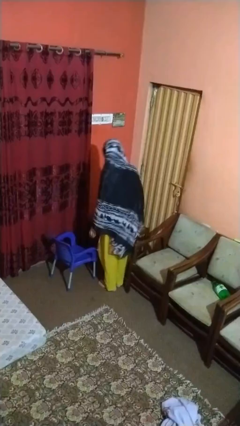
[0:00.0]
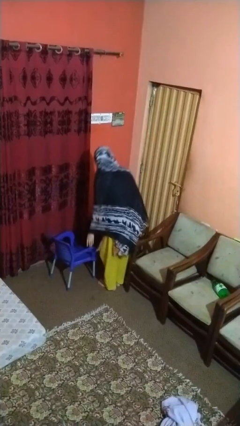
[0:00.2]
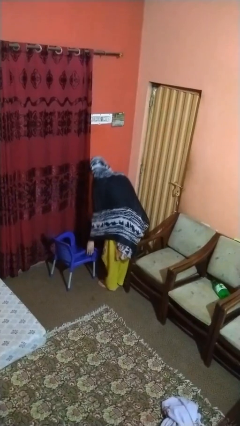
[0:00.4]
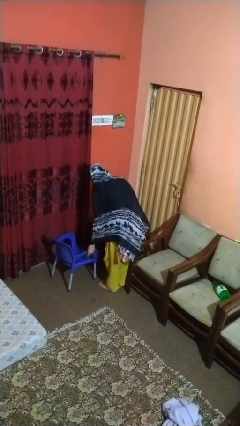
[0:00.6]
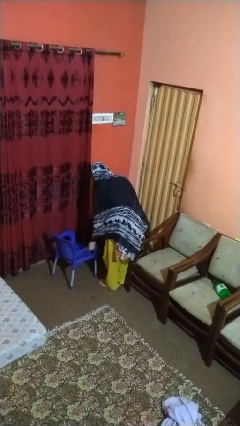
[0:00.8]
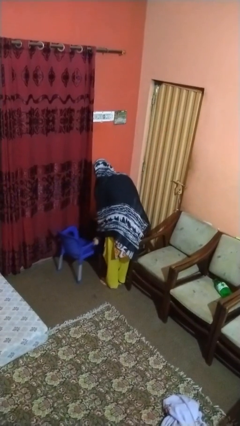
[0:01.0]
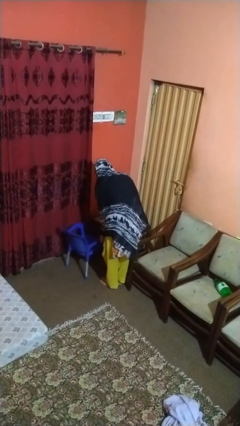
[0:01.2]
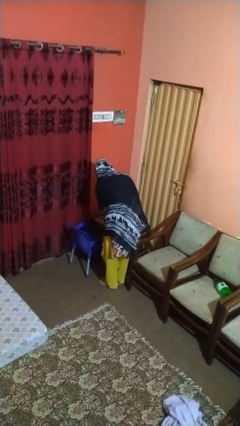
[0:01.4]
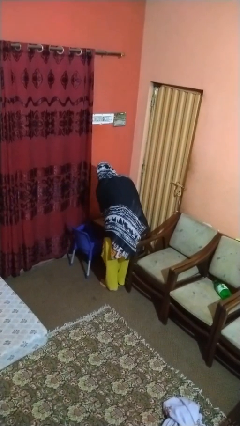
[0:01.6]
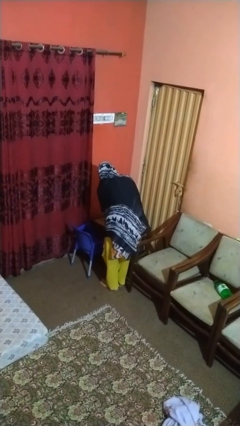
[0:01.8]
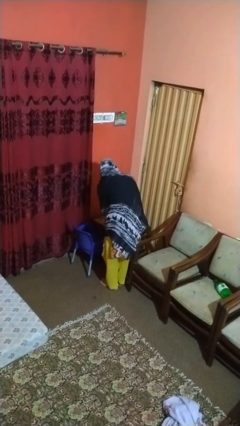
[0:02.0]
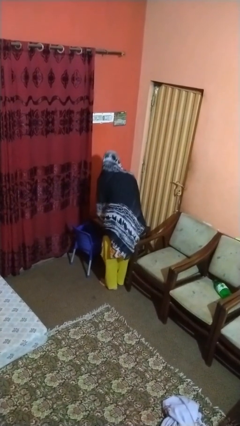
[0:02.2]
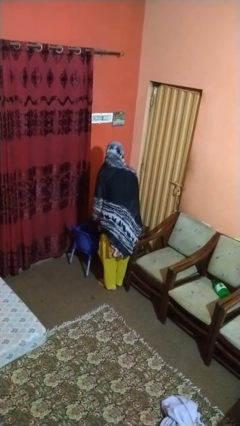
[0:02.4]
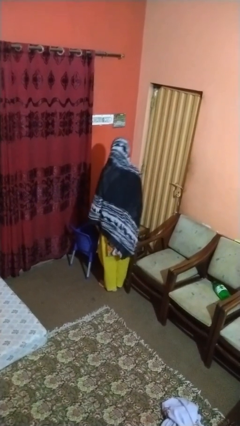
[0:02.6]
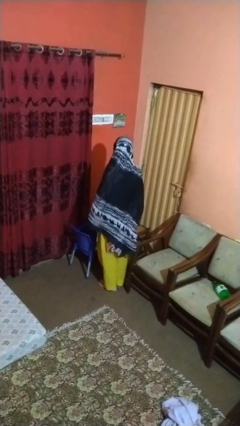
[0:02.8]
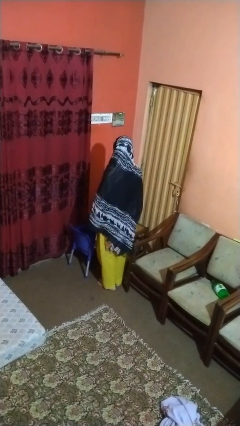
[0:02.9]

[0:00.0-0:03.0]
person pushes in chair

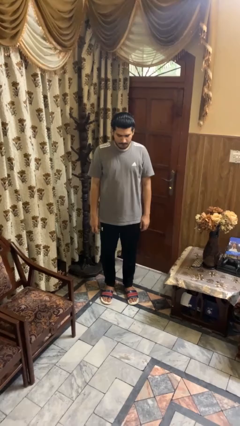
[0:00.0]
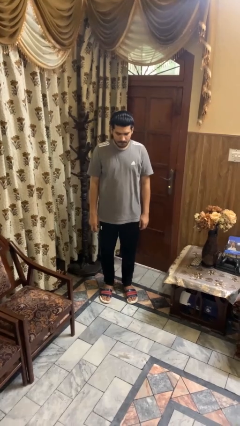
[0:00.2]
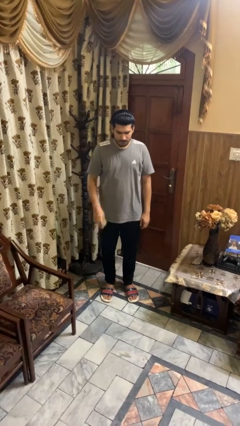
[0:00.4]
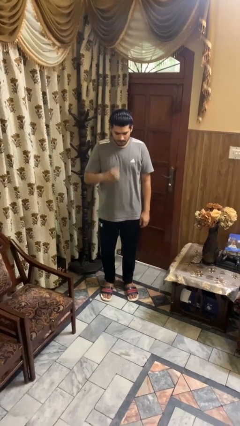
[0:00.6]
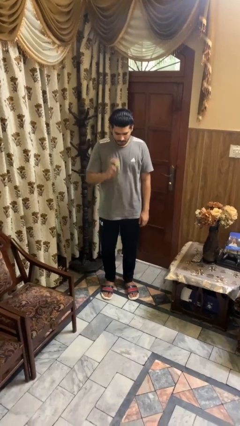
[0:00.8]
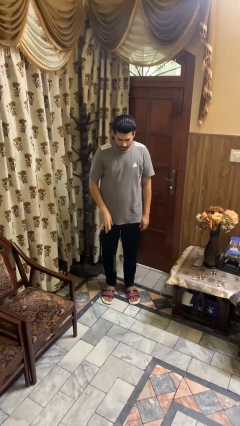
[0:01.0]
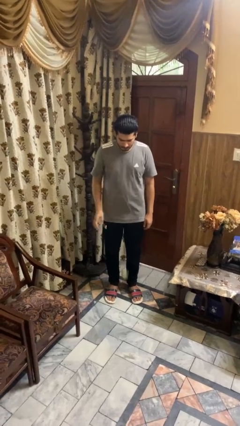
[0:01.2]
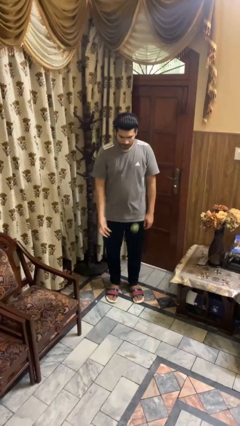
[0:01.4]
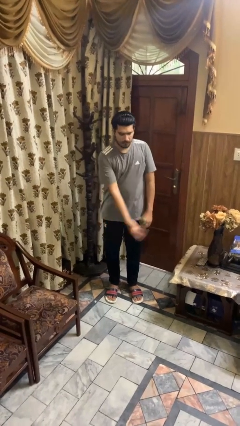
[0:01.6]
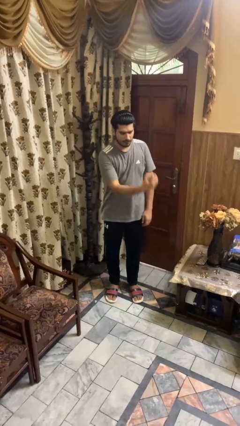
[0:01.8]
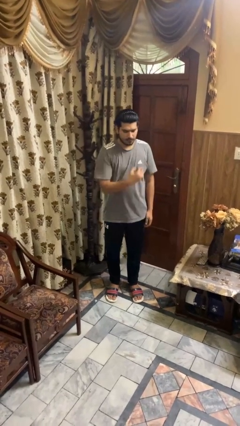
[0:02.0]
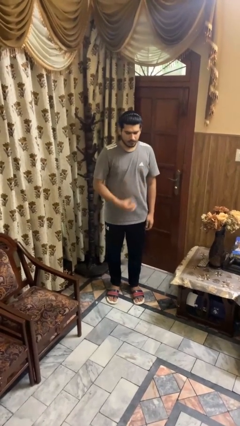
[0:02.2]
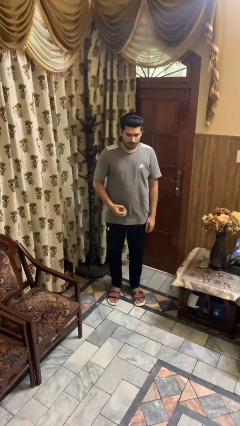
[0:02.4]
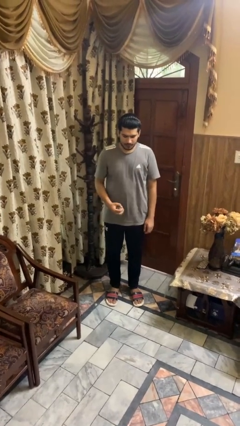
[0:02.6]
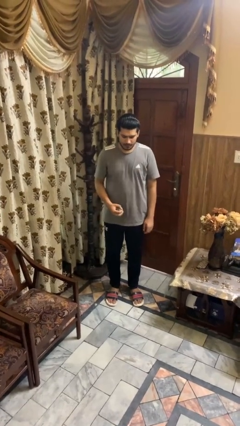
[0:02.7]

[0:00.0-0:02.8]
person bounces ball on floor

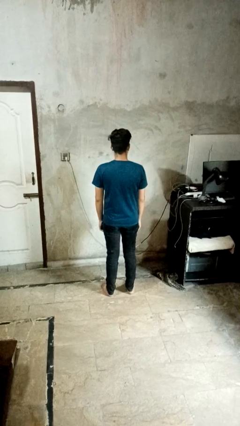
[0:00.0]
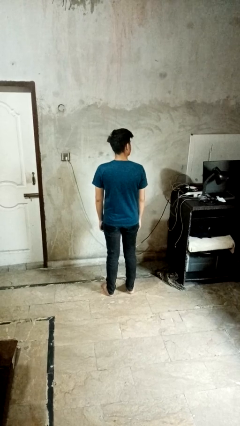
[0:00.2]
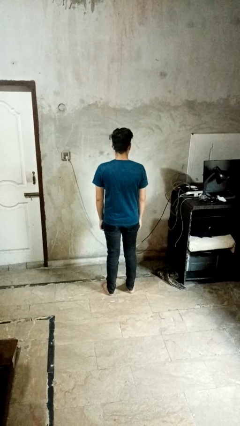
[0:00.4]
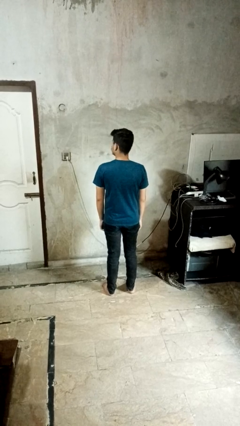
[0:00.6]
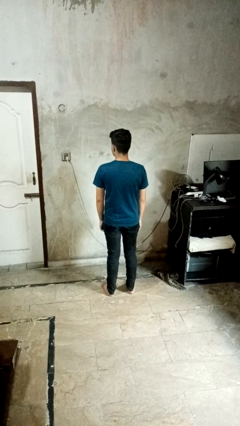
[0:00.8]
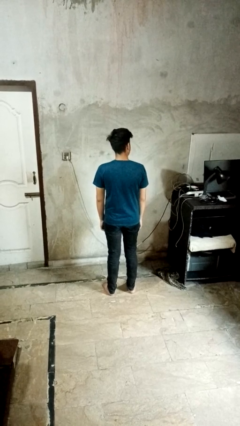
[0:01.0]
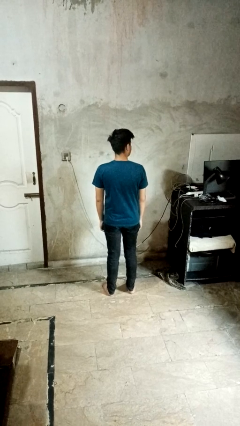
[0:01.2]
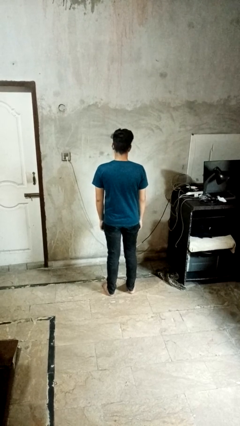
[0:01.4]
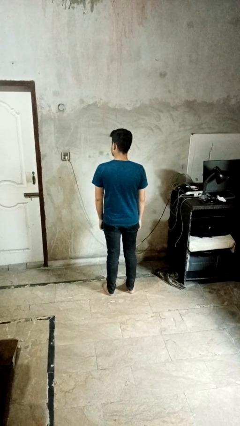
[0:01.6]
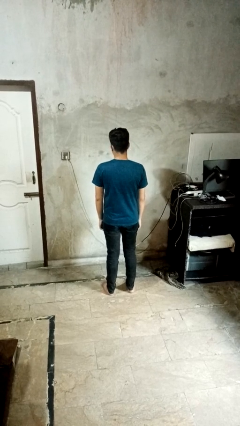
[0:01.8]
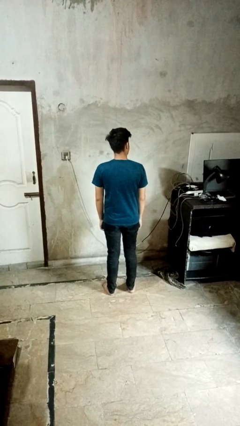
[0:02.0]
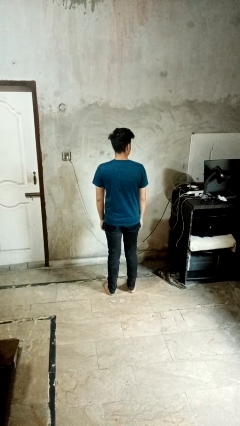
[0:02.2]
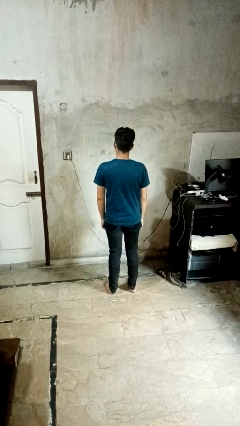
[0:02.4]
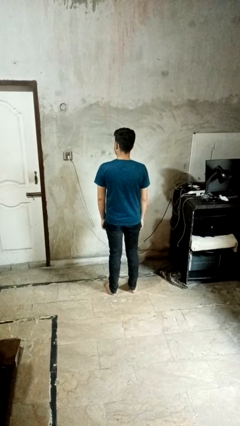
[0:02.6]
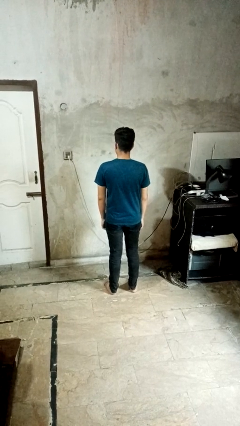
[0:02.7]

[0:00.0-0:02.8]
person shakes head

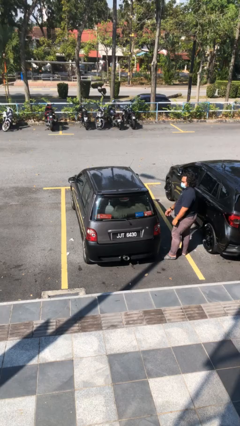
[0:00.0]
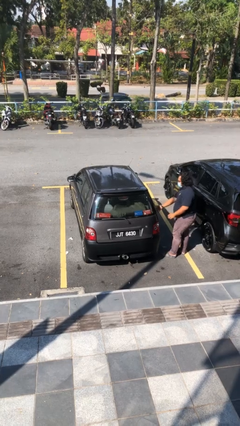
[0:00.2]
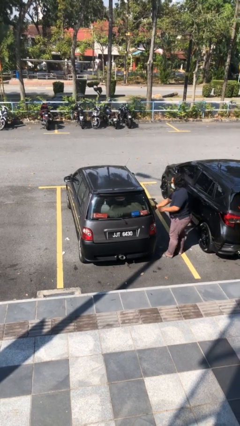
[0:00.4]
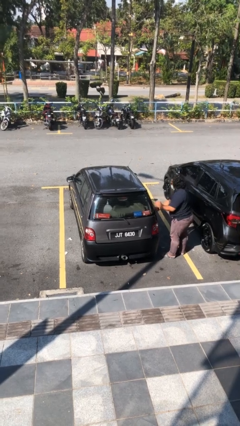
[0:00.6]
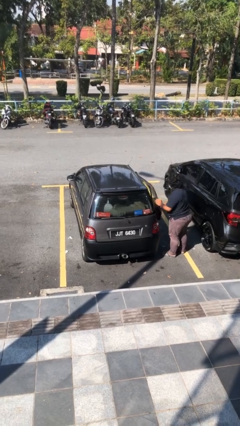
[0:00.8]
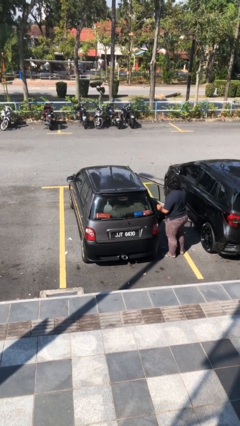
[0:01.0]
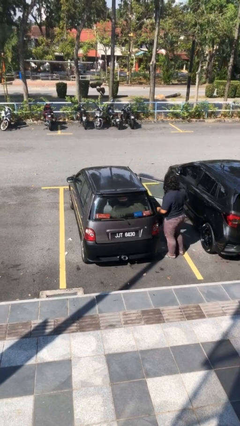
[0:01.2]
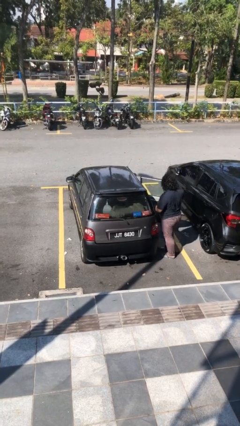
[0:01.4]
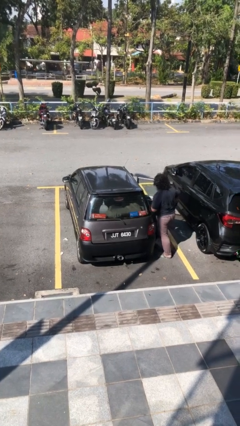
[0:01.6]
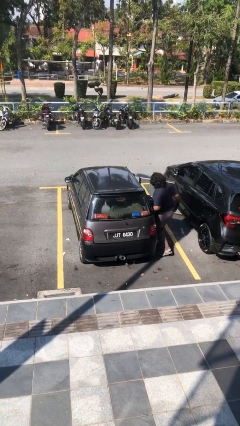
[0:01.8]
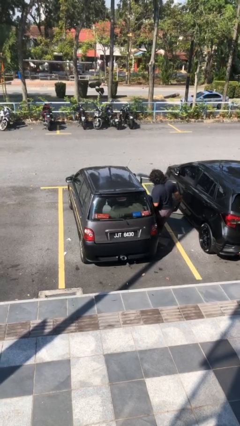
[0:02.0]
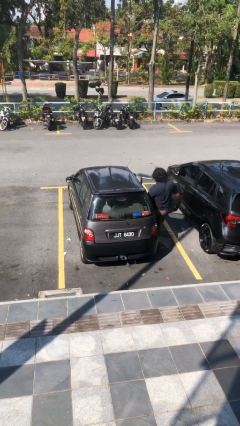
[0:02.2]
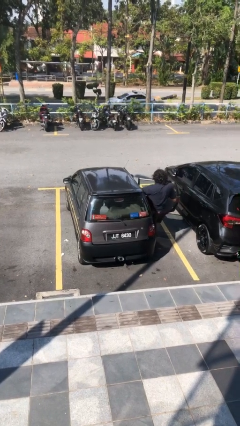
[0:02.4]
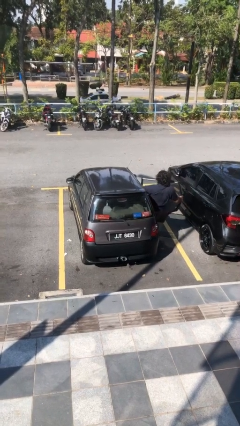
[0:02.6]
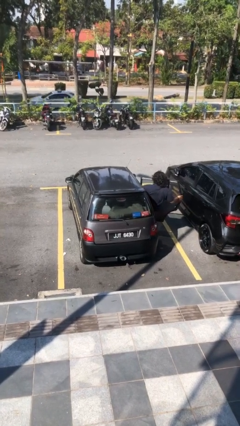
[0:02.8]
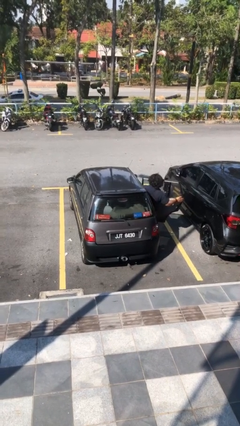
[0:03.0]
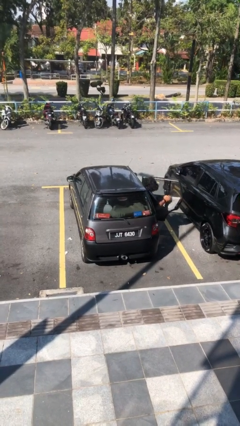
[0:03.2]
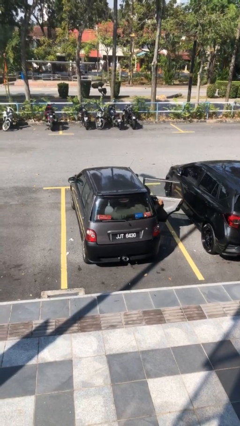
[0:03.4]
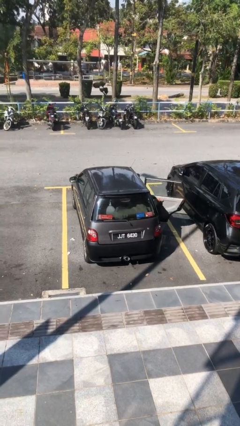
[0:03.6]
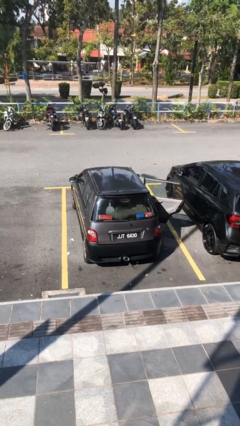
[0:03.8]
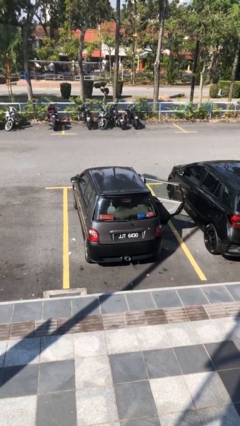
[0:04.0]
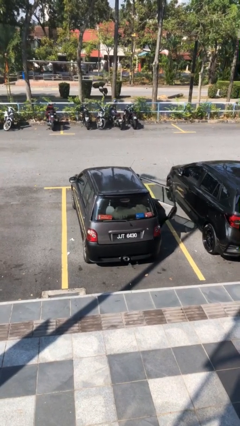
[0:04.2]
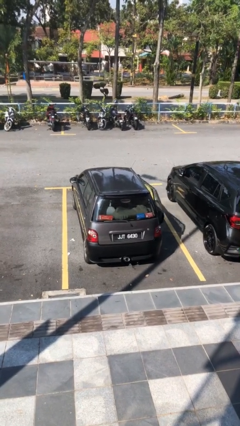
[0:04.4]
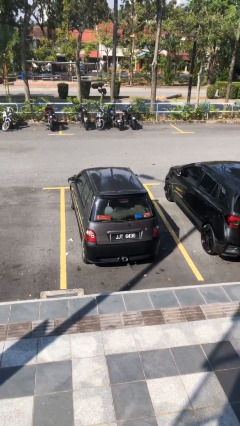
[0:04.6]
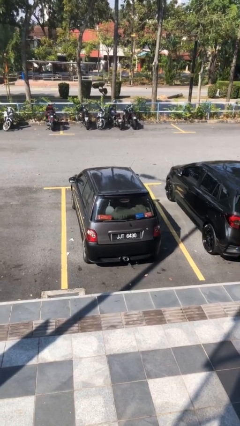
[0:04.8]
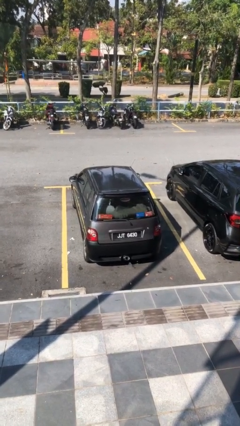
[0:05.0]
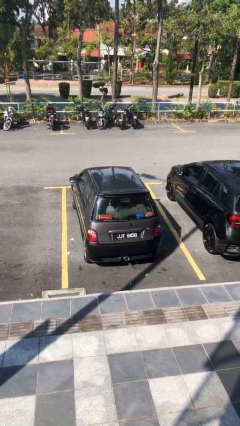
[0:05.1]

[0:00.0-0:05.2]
car picks up person

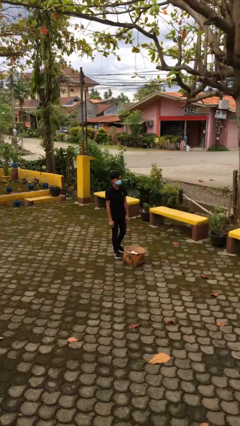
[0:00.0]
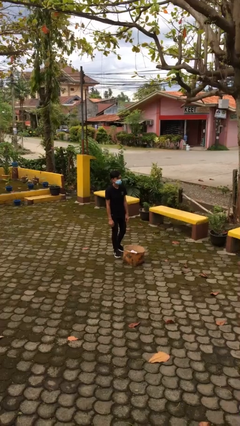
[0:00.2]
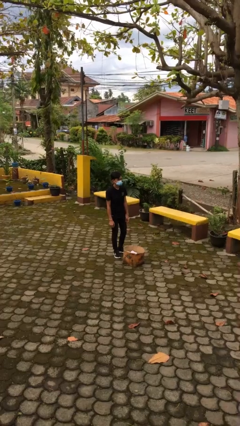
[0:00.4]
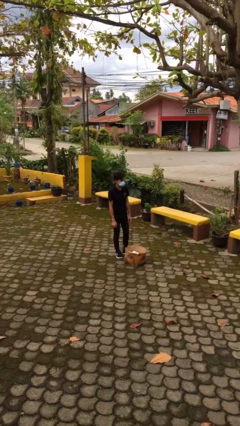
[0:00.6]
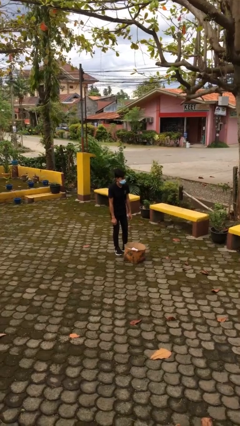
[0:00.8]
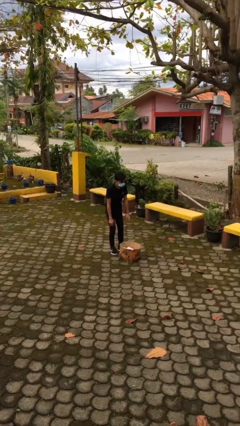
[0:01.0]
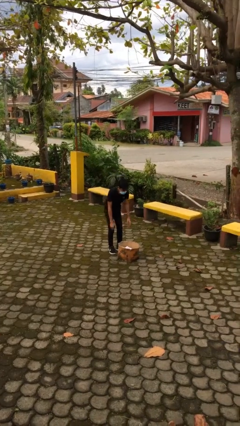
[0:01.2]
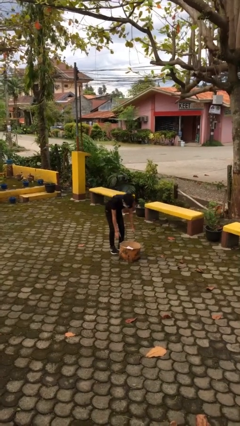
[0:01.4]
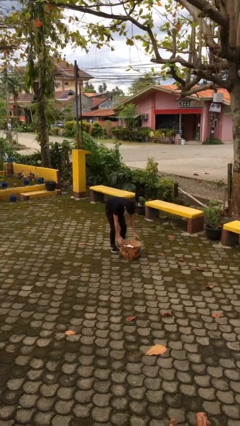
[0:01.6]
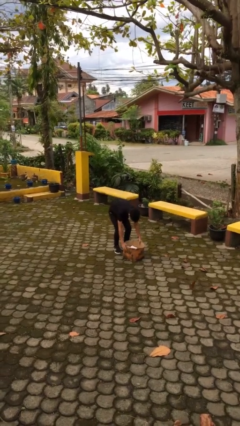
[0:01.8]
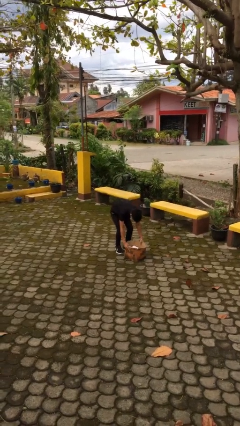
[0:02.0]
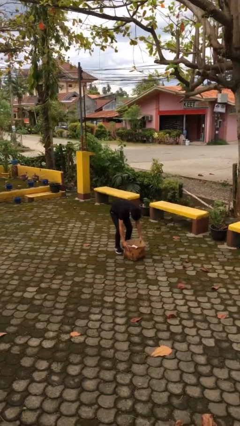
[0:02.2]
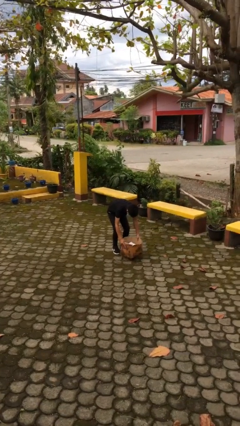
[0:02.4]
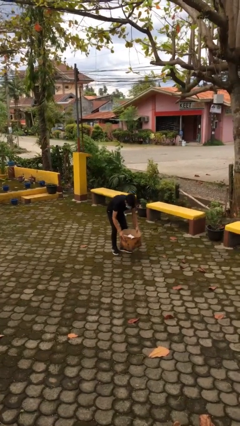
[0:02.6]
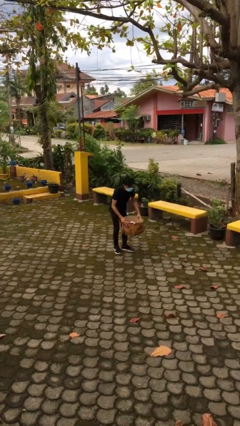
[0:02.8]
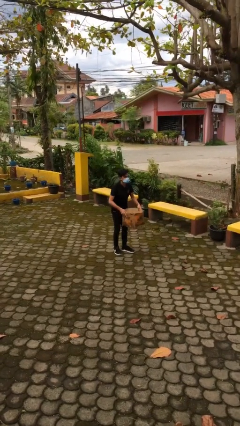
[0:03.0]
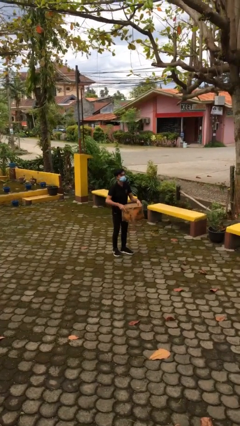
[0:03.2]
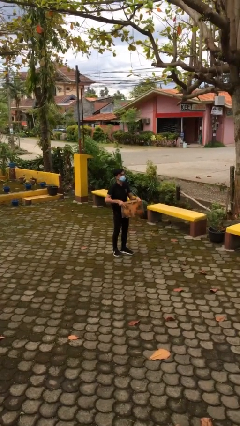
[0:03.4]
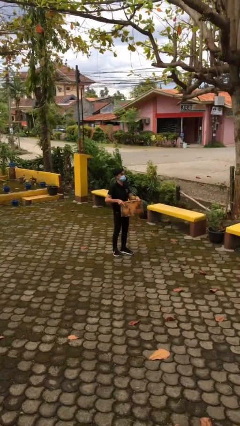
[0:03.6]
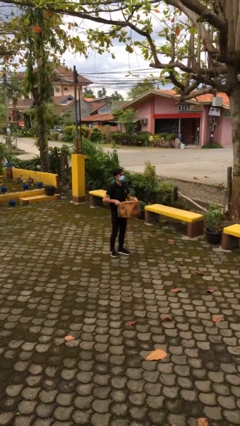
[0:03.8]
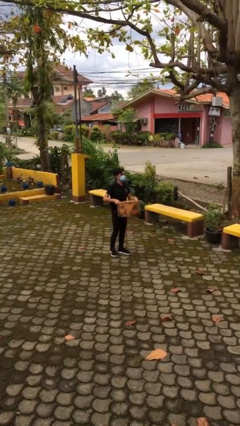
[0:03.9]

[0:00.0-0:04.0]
person picks up object from floor
